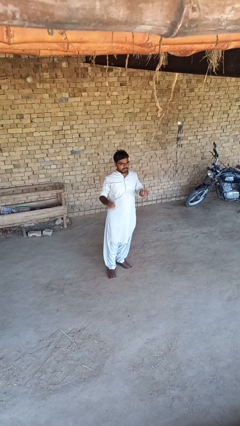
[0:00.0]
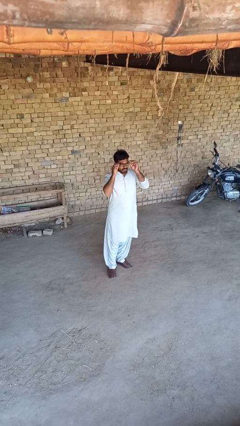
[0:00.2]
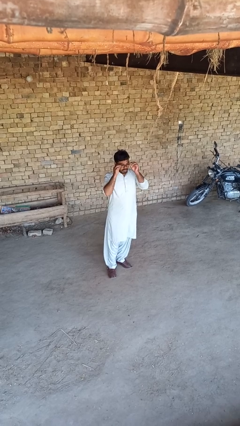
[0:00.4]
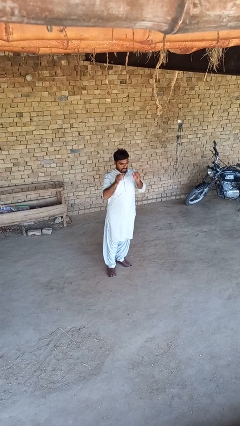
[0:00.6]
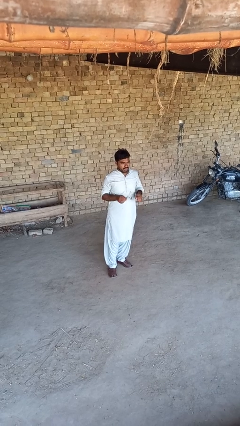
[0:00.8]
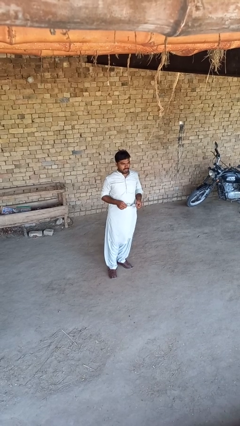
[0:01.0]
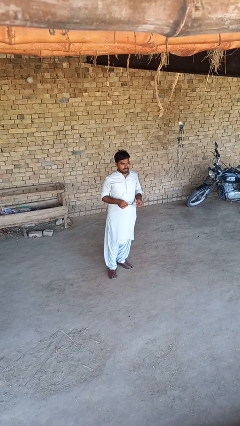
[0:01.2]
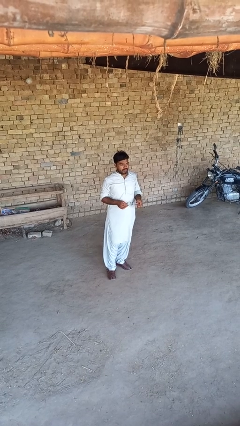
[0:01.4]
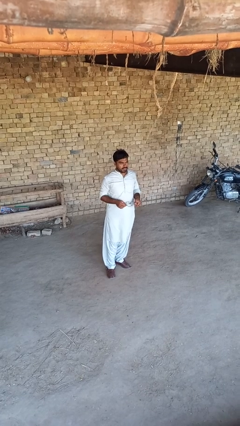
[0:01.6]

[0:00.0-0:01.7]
person takes off glasses

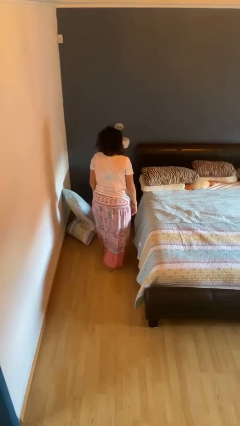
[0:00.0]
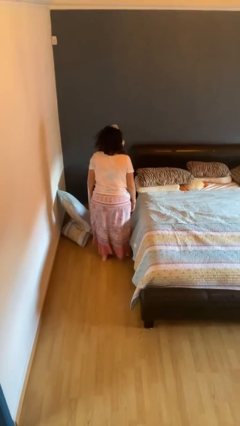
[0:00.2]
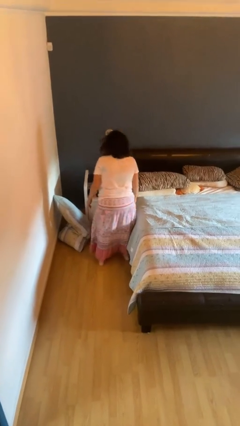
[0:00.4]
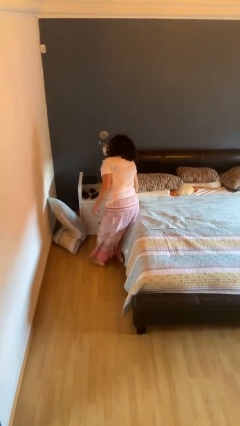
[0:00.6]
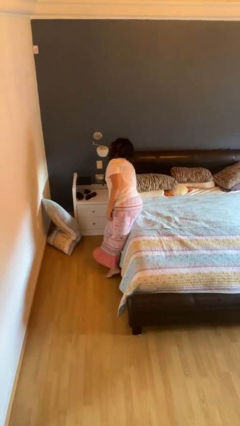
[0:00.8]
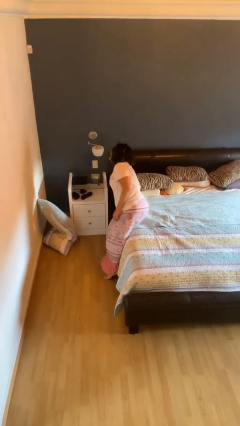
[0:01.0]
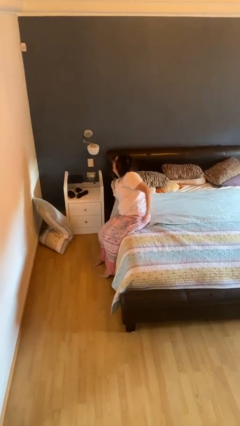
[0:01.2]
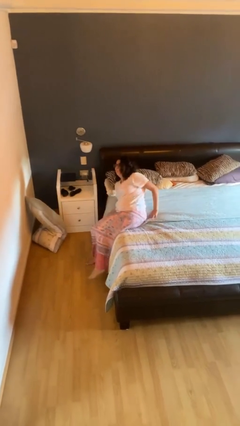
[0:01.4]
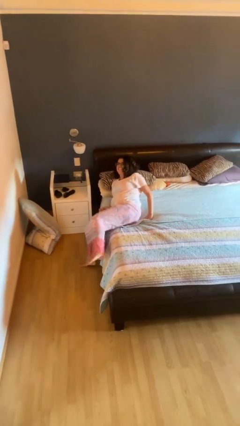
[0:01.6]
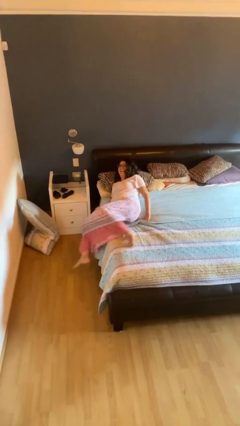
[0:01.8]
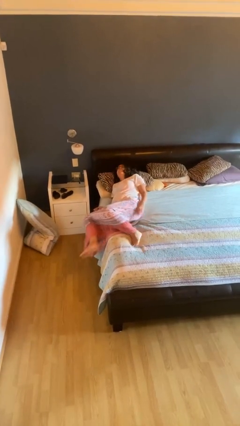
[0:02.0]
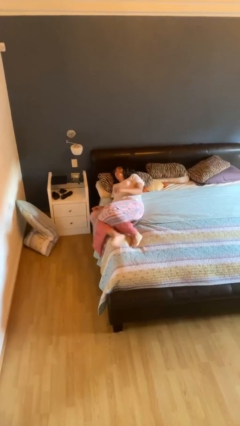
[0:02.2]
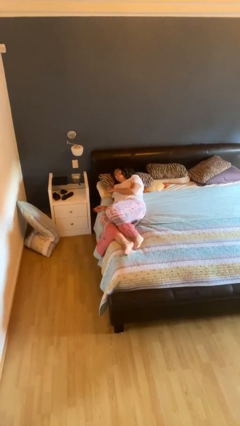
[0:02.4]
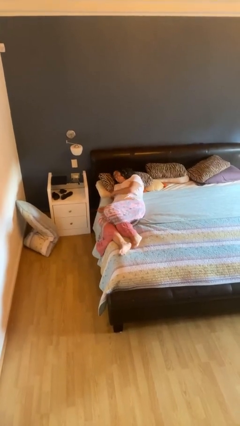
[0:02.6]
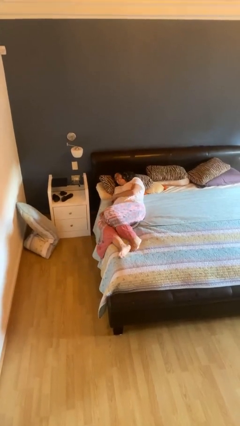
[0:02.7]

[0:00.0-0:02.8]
person lies down on bed

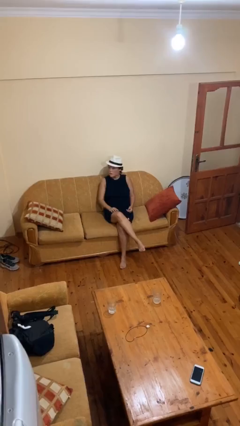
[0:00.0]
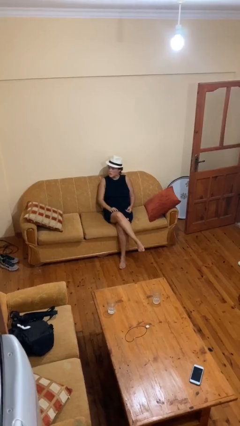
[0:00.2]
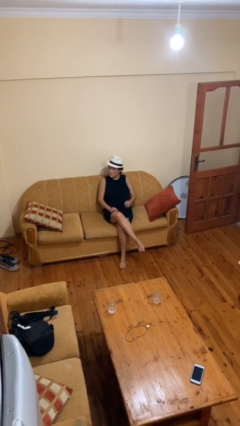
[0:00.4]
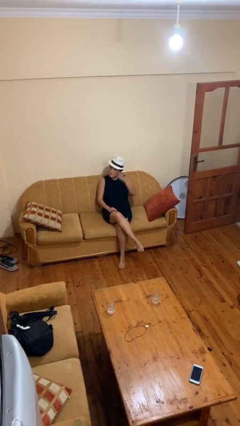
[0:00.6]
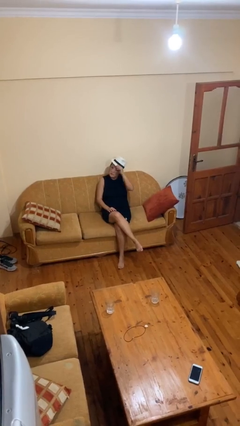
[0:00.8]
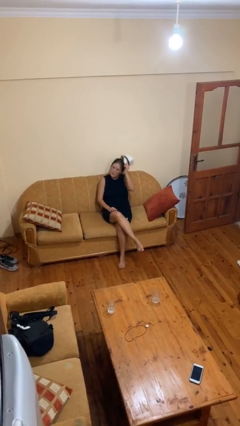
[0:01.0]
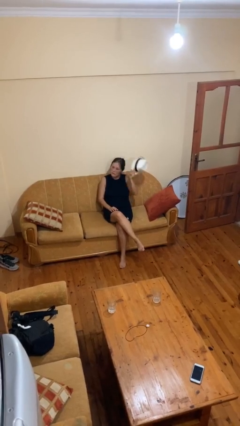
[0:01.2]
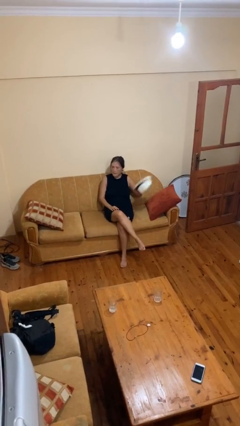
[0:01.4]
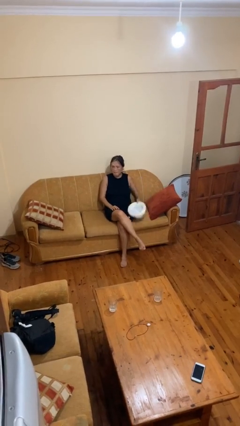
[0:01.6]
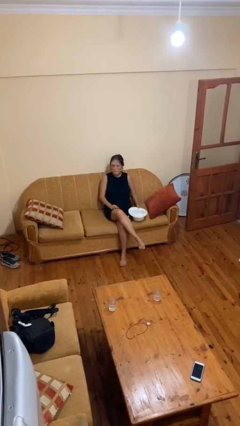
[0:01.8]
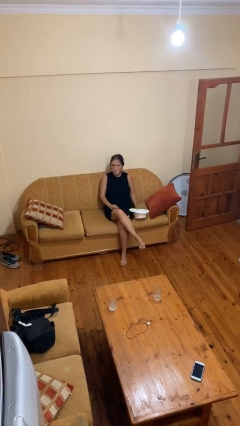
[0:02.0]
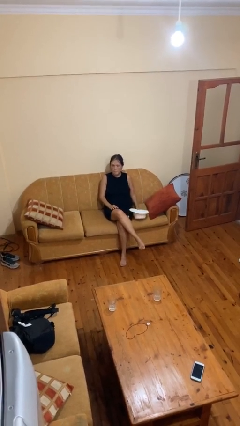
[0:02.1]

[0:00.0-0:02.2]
person takes off hat

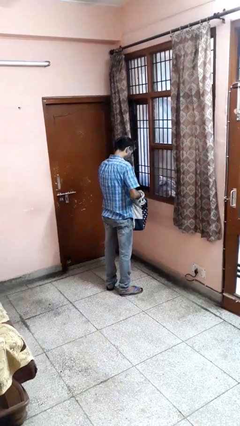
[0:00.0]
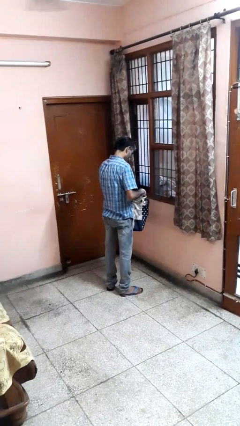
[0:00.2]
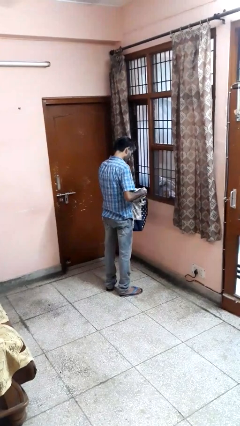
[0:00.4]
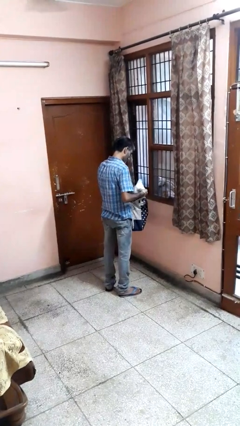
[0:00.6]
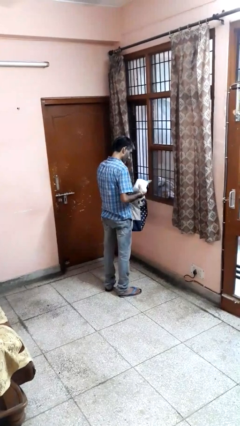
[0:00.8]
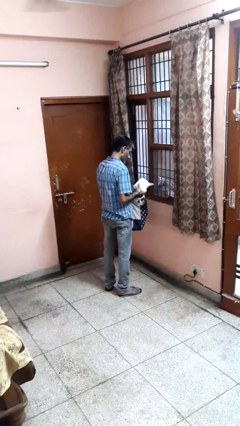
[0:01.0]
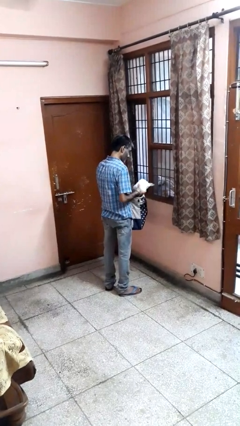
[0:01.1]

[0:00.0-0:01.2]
person takes object from bag

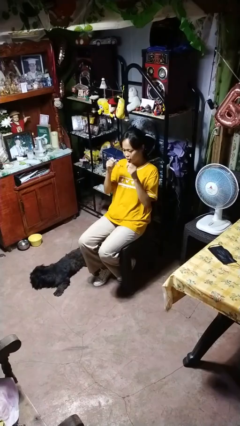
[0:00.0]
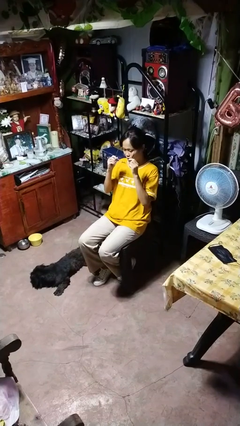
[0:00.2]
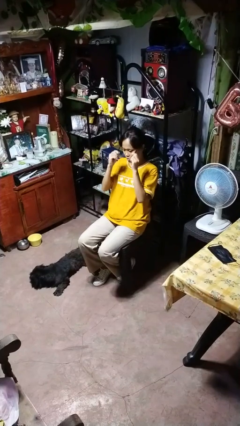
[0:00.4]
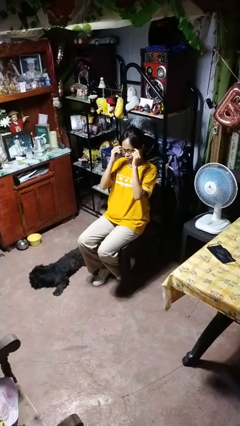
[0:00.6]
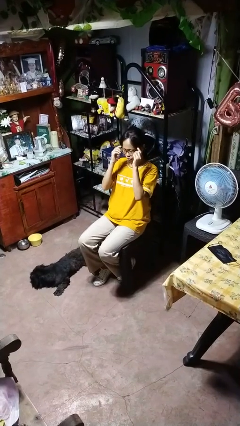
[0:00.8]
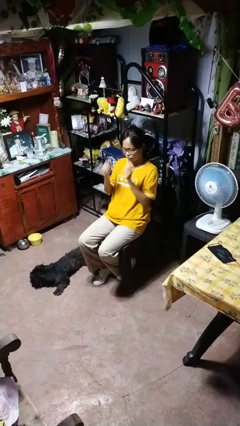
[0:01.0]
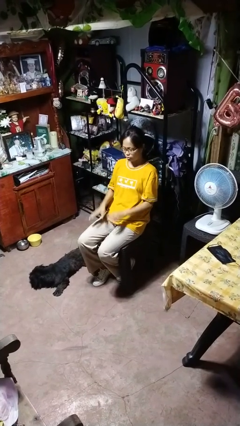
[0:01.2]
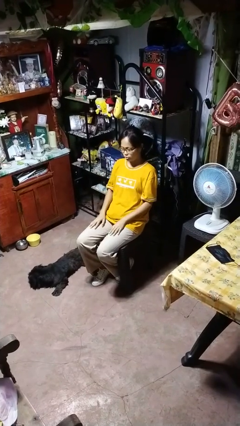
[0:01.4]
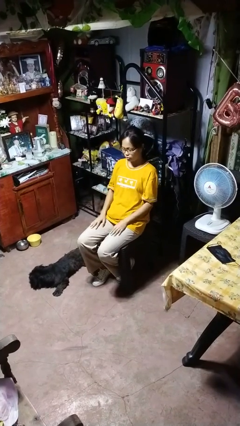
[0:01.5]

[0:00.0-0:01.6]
person puts on glasses

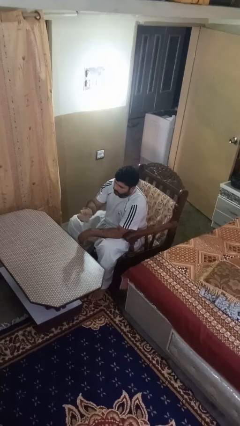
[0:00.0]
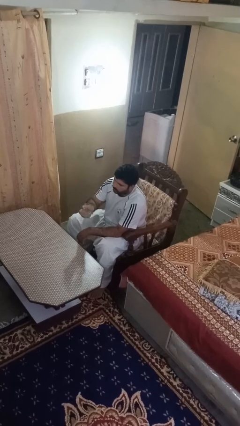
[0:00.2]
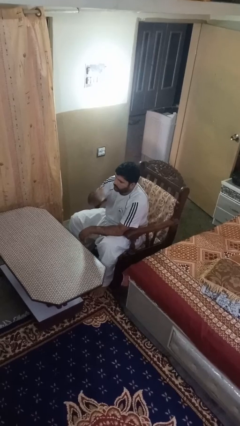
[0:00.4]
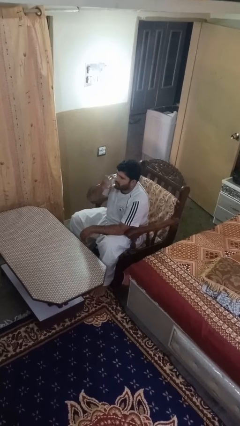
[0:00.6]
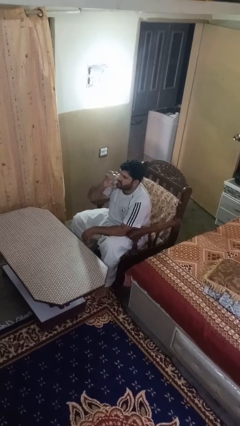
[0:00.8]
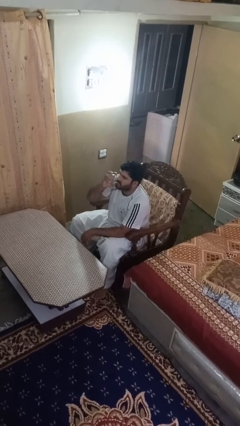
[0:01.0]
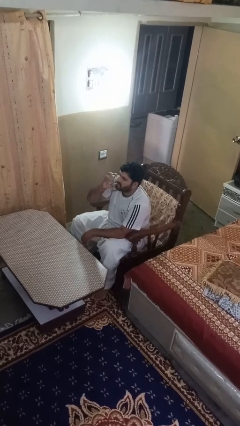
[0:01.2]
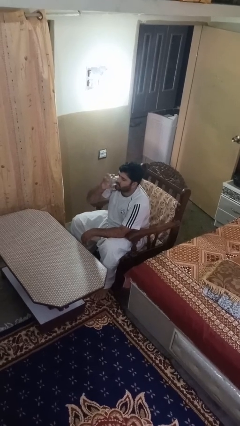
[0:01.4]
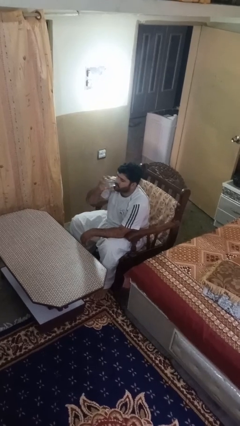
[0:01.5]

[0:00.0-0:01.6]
person drinks from shotglass

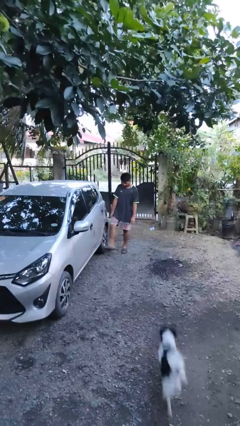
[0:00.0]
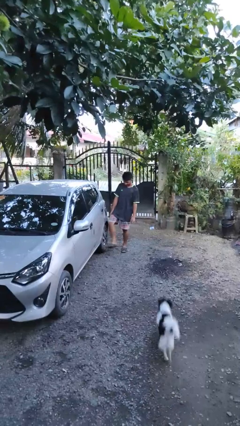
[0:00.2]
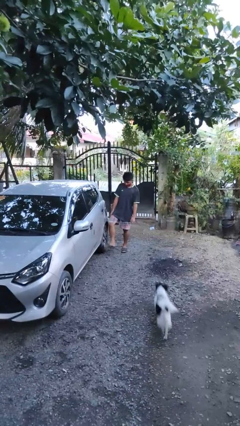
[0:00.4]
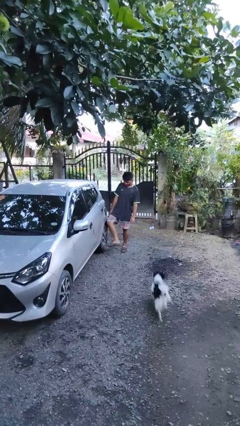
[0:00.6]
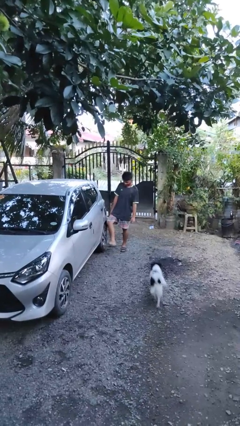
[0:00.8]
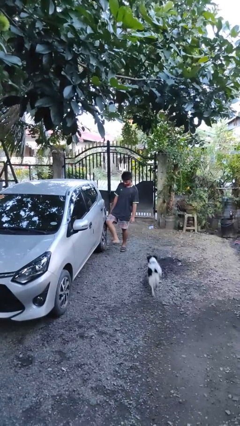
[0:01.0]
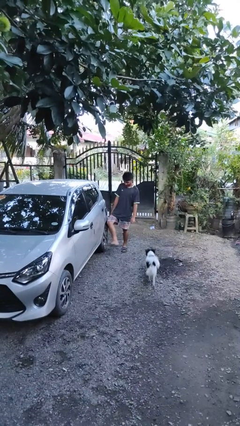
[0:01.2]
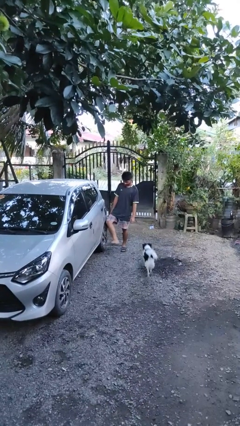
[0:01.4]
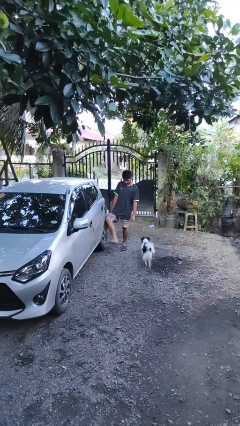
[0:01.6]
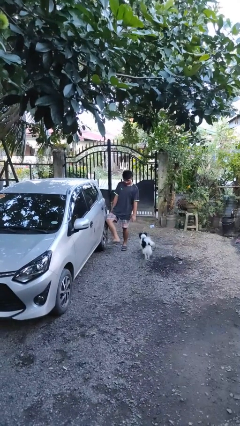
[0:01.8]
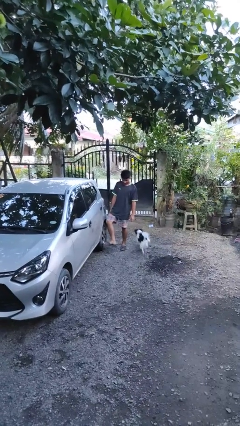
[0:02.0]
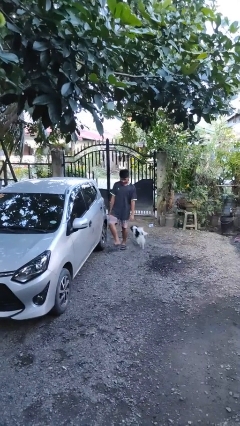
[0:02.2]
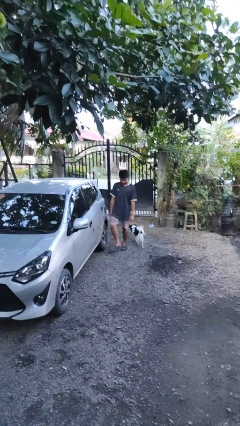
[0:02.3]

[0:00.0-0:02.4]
person kicks car tires

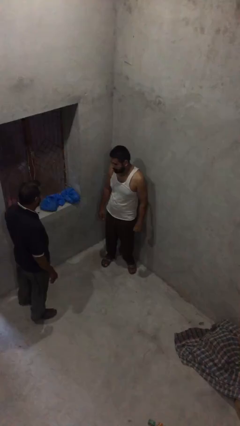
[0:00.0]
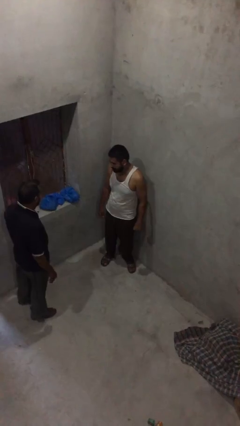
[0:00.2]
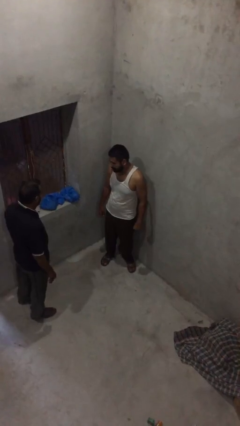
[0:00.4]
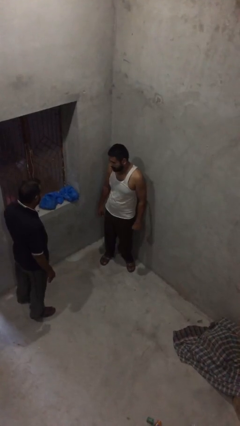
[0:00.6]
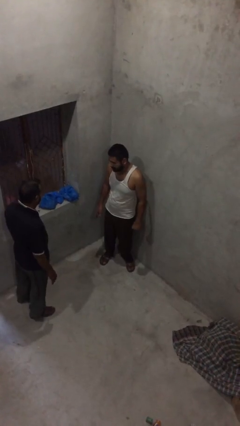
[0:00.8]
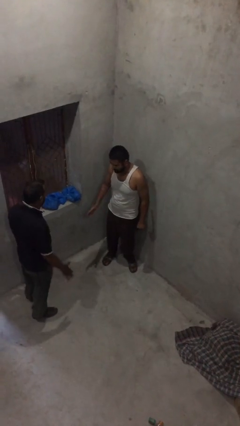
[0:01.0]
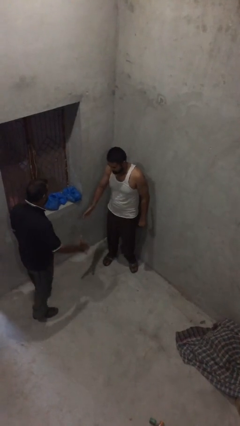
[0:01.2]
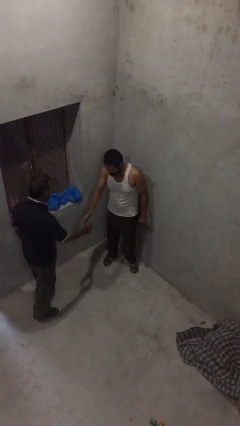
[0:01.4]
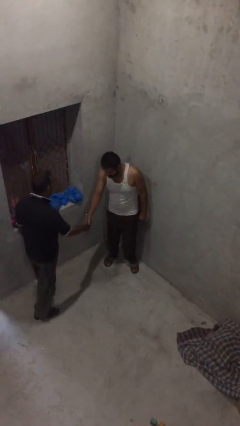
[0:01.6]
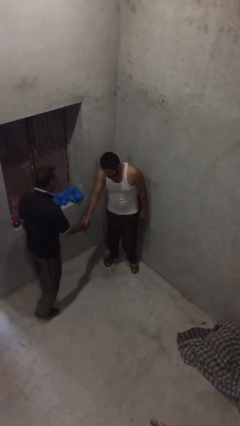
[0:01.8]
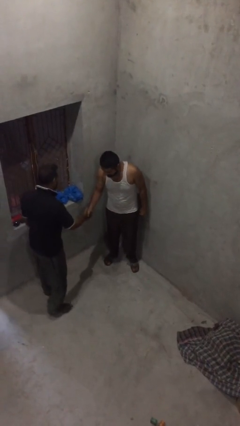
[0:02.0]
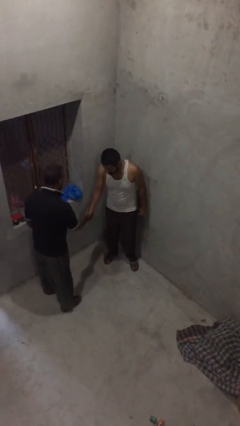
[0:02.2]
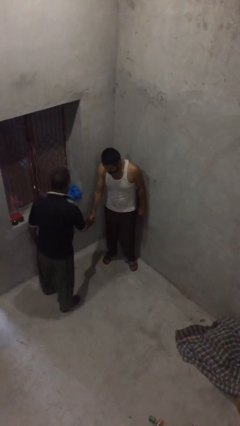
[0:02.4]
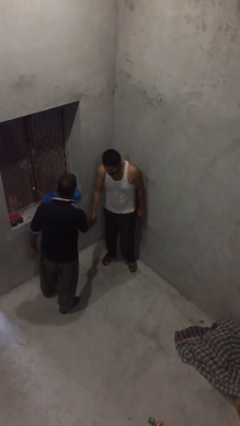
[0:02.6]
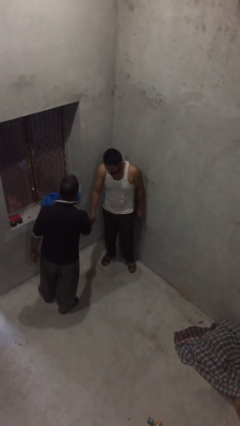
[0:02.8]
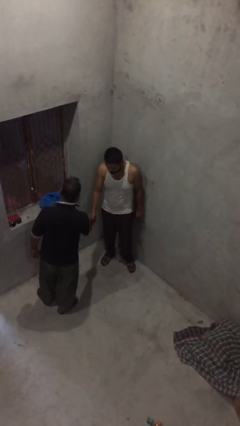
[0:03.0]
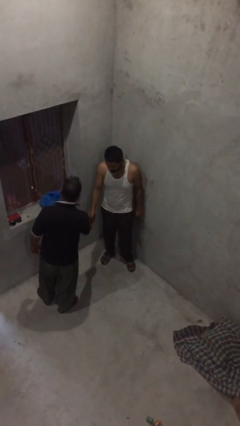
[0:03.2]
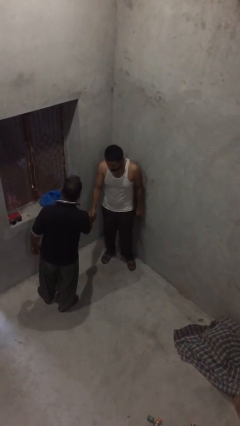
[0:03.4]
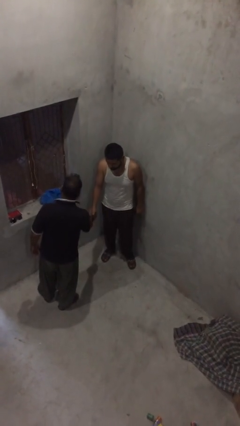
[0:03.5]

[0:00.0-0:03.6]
person shakes hand
